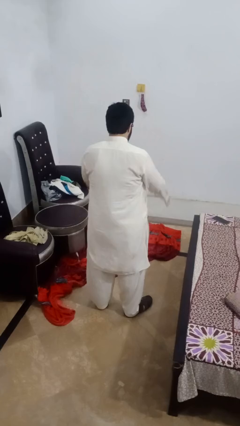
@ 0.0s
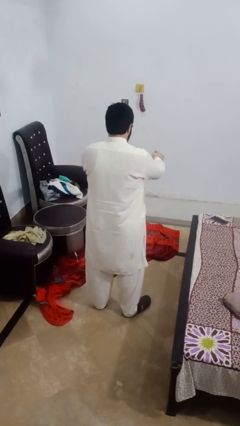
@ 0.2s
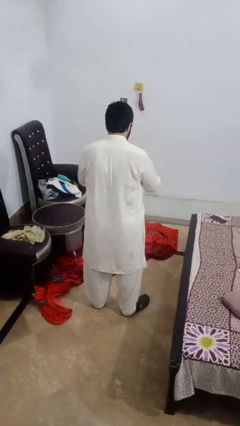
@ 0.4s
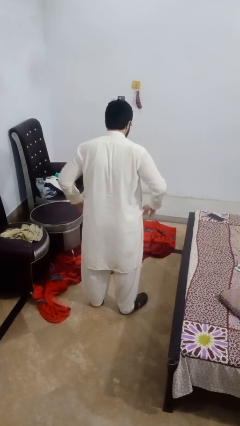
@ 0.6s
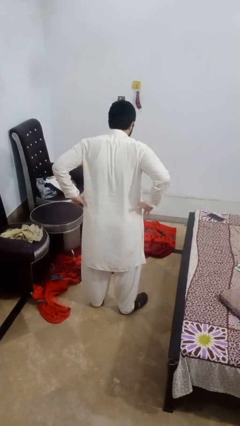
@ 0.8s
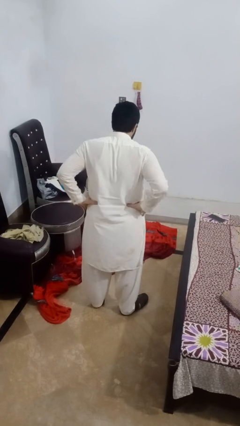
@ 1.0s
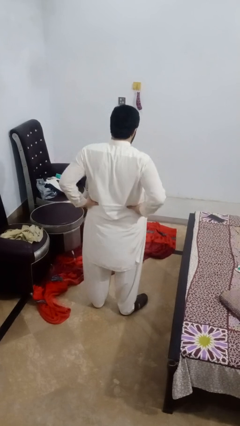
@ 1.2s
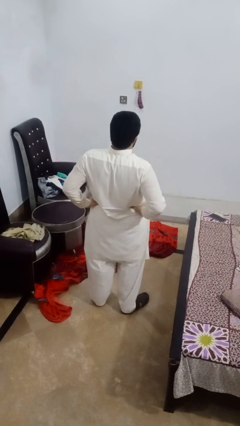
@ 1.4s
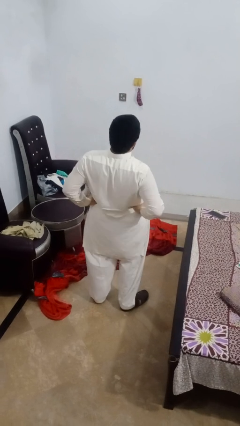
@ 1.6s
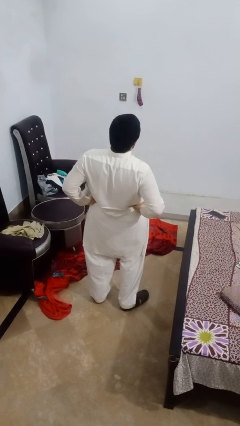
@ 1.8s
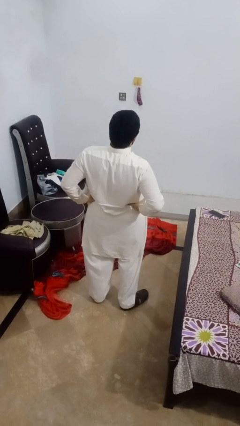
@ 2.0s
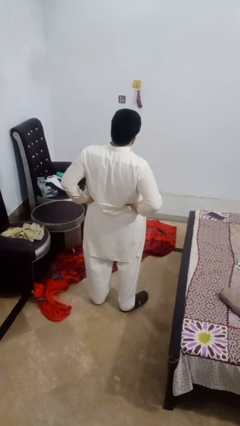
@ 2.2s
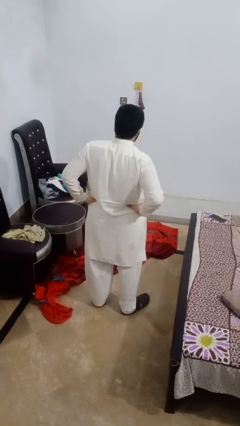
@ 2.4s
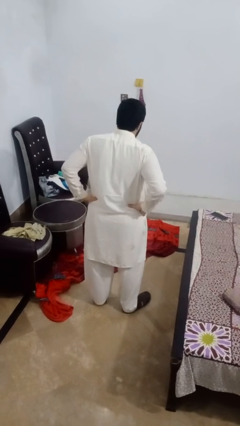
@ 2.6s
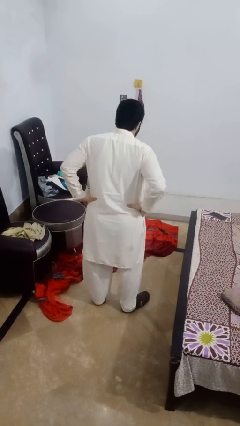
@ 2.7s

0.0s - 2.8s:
person stretches back

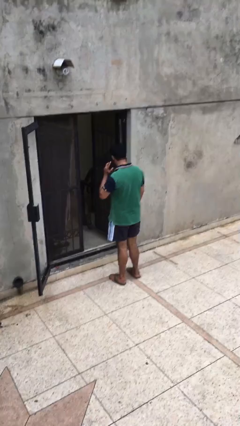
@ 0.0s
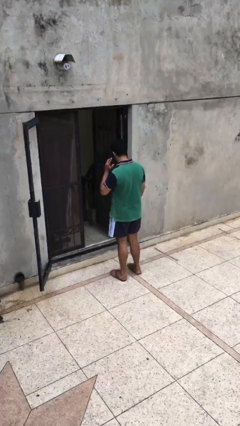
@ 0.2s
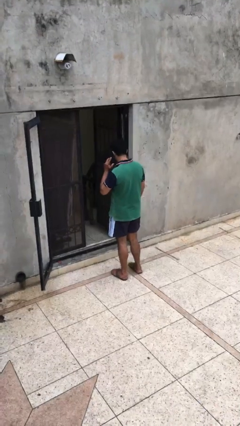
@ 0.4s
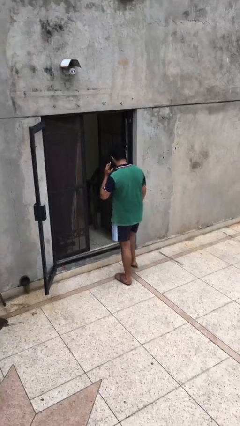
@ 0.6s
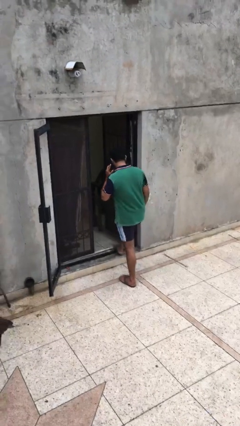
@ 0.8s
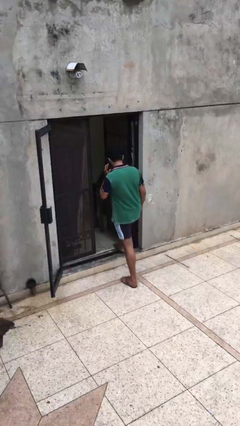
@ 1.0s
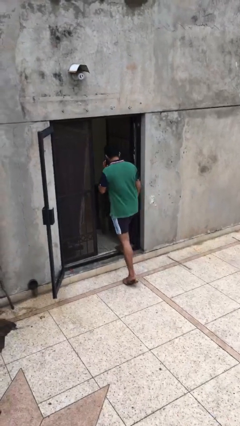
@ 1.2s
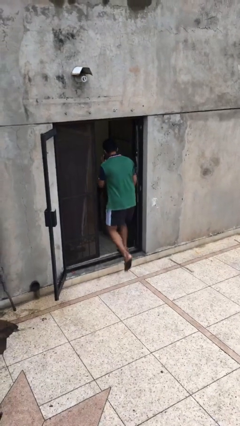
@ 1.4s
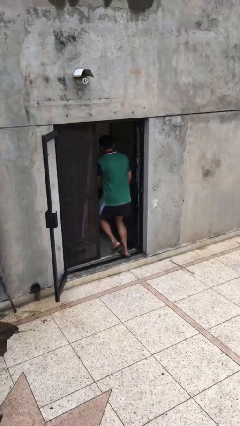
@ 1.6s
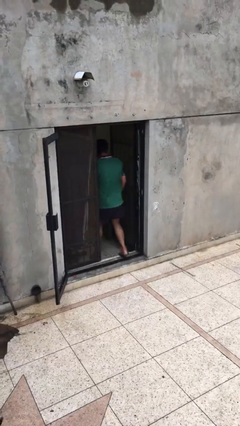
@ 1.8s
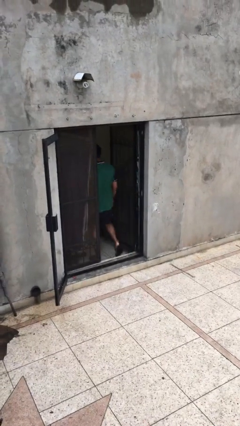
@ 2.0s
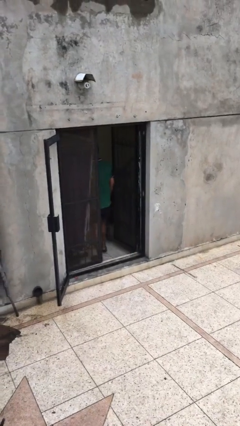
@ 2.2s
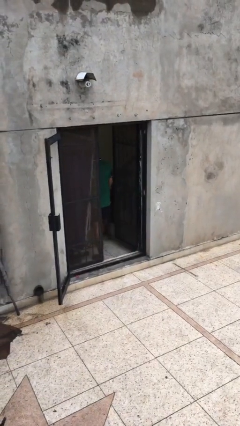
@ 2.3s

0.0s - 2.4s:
person exits scene through structure

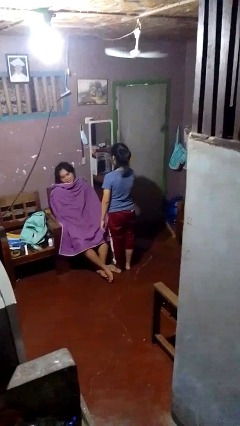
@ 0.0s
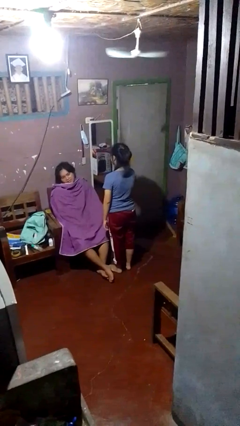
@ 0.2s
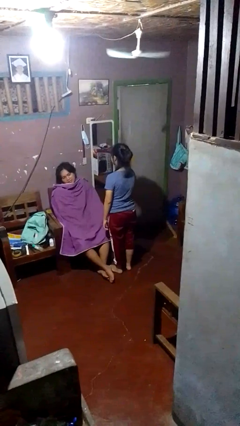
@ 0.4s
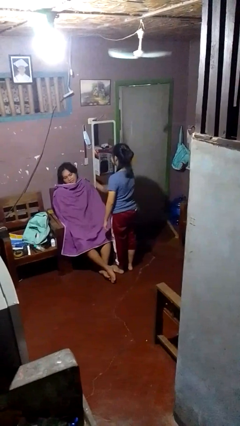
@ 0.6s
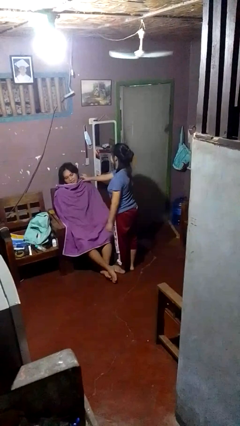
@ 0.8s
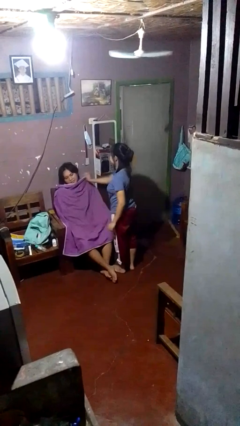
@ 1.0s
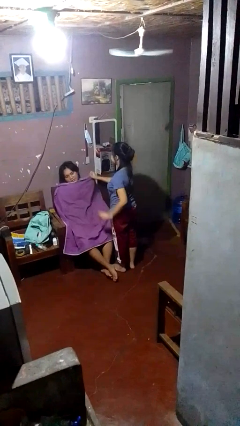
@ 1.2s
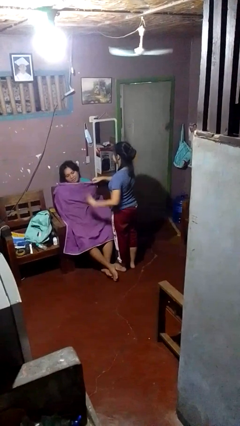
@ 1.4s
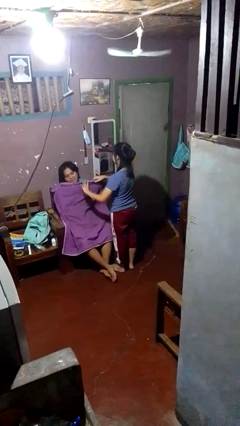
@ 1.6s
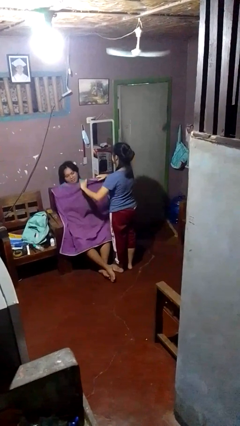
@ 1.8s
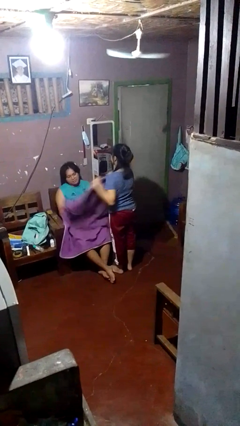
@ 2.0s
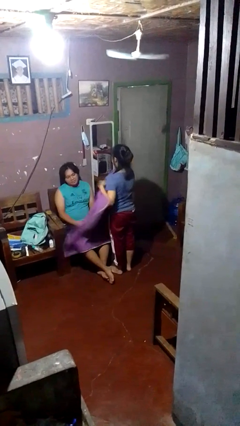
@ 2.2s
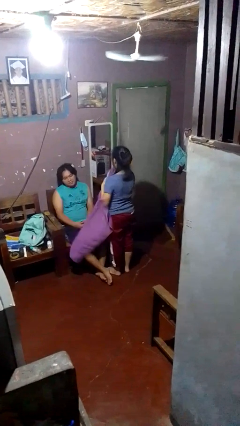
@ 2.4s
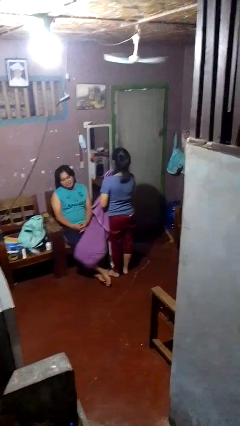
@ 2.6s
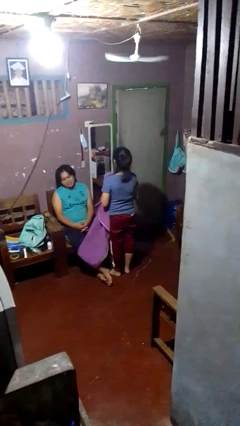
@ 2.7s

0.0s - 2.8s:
person uncovers friend with blanket

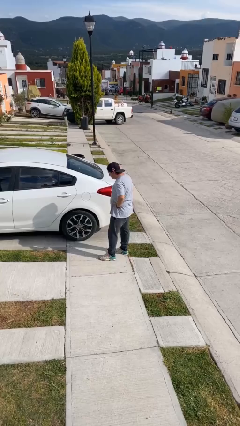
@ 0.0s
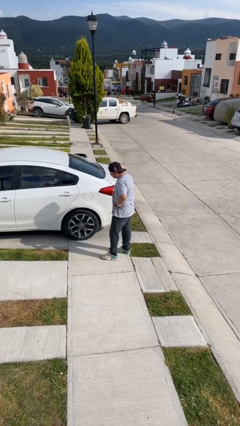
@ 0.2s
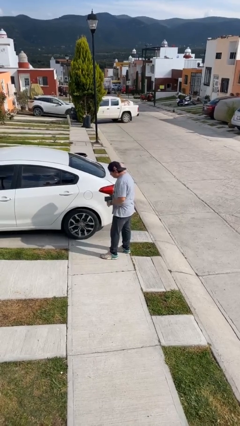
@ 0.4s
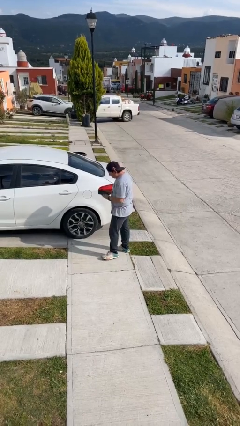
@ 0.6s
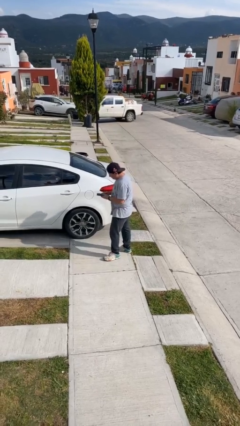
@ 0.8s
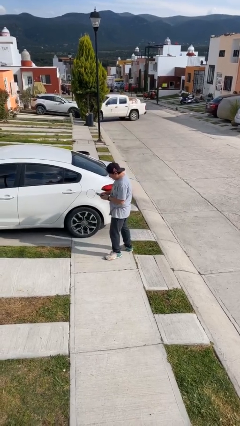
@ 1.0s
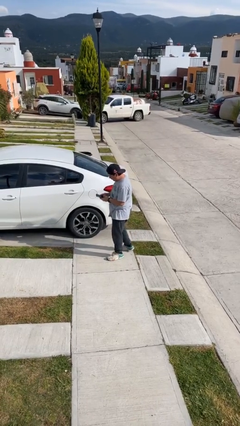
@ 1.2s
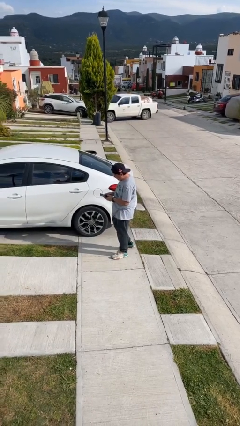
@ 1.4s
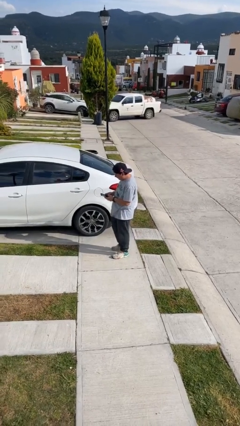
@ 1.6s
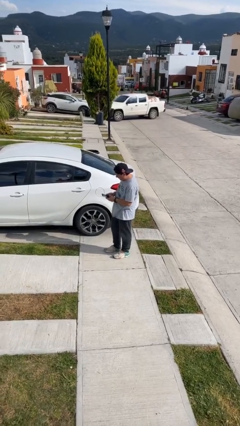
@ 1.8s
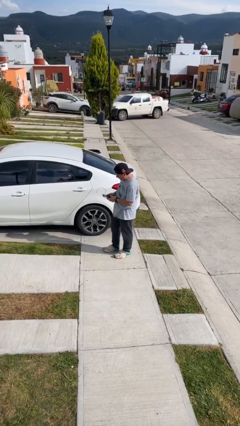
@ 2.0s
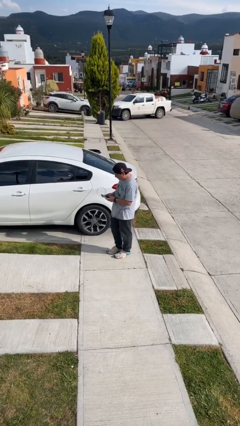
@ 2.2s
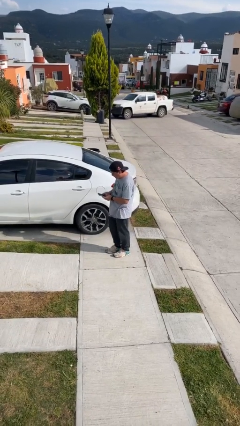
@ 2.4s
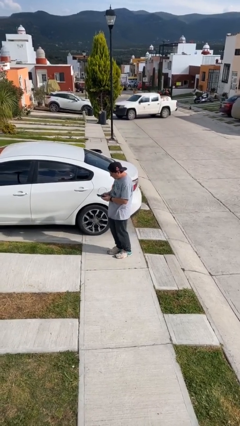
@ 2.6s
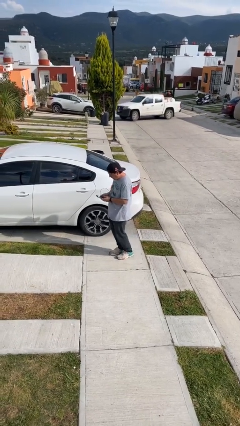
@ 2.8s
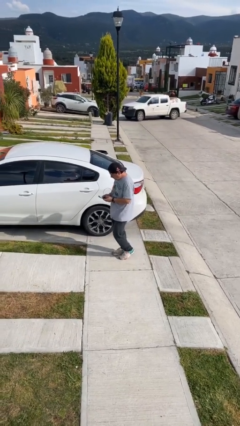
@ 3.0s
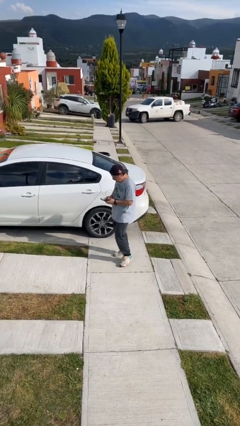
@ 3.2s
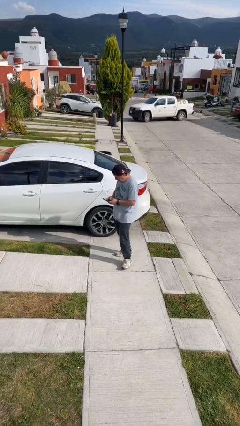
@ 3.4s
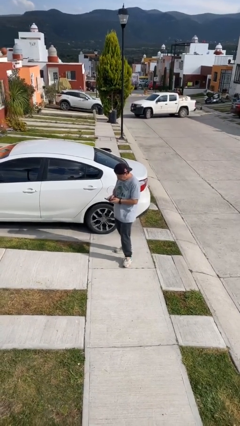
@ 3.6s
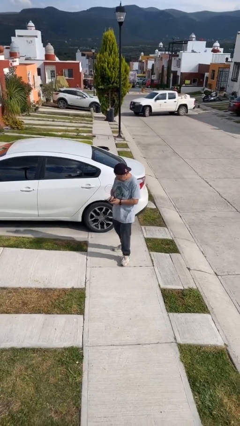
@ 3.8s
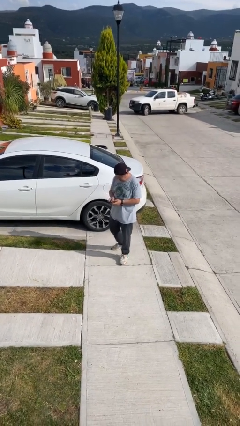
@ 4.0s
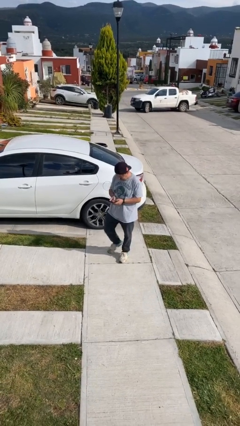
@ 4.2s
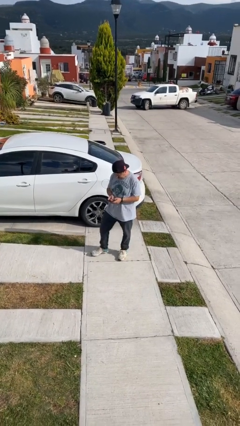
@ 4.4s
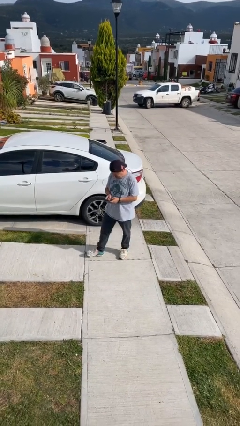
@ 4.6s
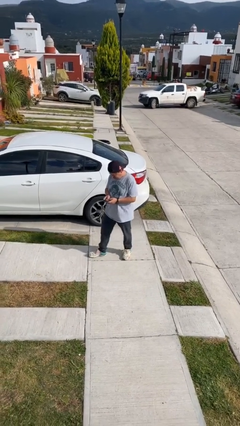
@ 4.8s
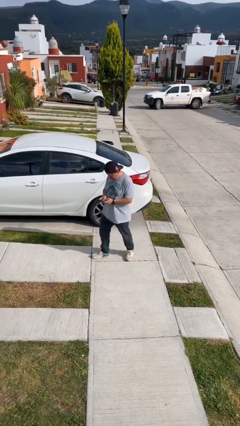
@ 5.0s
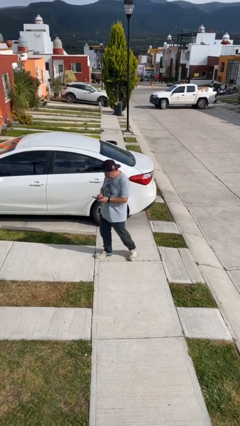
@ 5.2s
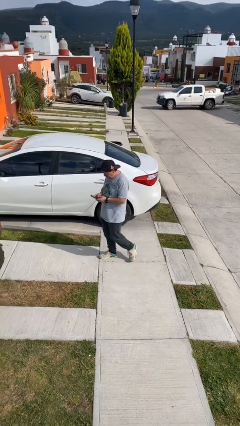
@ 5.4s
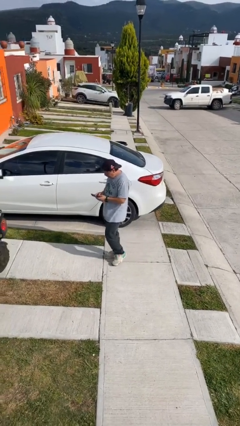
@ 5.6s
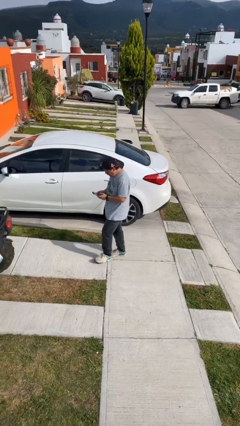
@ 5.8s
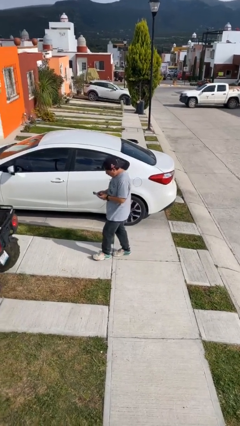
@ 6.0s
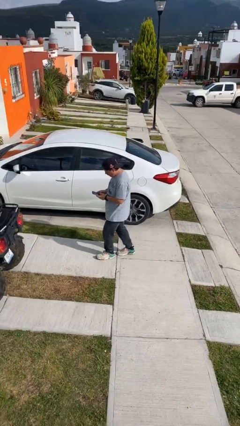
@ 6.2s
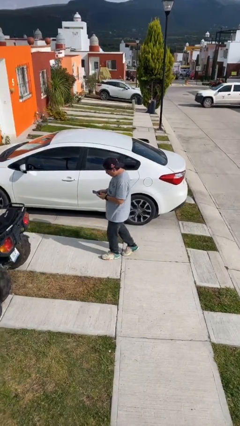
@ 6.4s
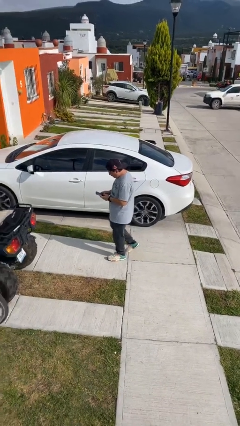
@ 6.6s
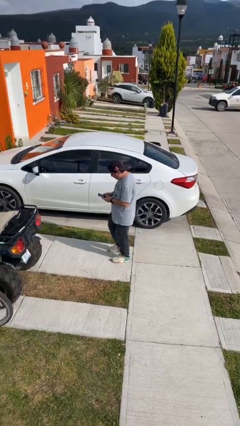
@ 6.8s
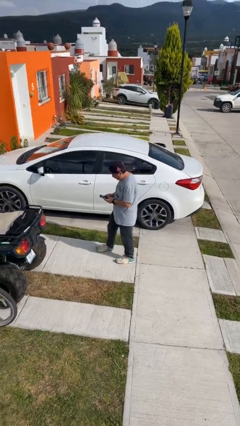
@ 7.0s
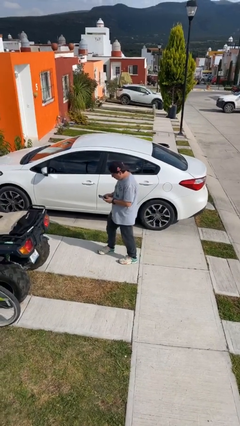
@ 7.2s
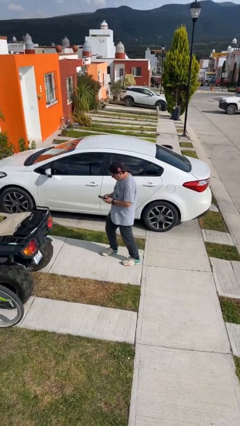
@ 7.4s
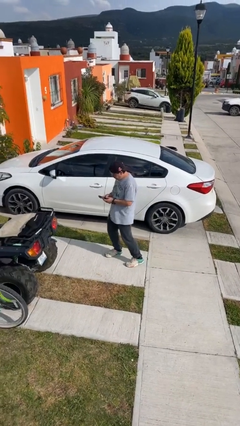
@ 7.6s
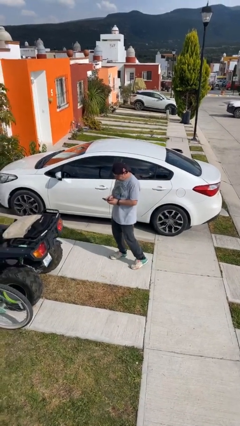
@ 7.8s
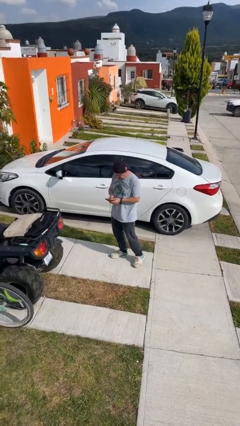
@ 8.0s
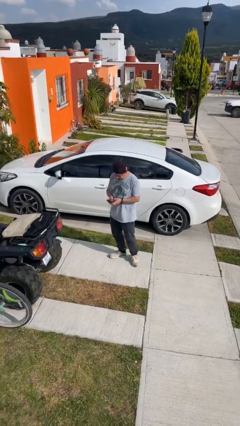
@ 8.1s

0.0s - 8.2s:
person texts on phone

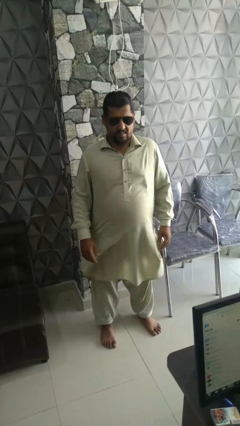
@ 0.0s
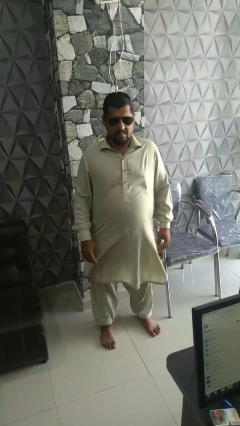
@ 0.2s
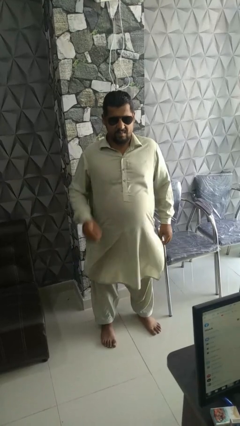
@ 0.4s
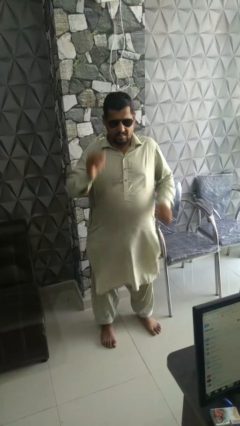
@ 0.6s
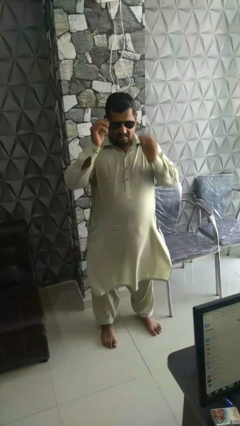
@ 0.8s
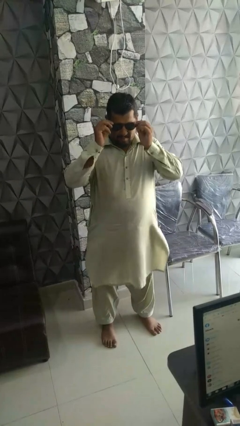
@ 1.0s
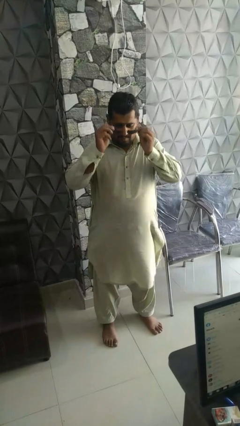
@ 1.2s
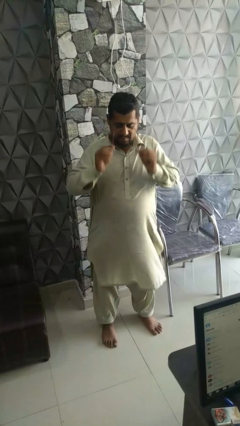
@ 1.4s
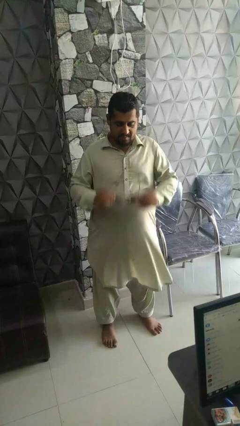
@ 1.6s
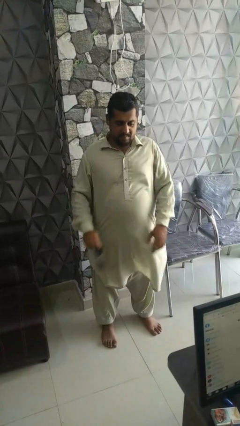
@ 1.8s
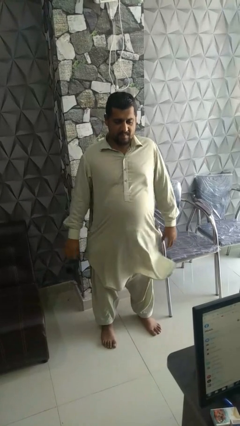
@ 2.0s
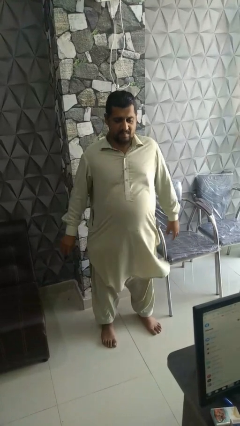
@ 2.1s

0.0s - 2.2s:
person takes off sunglasses
